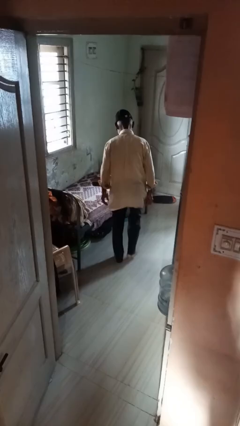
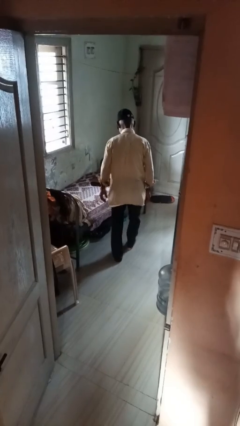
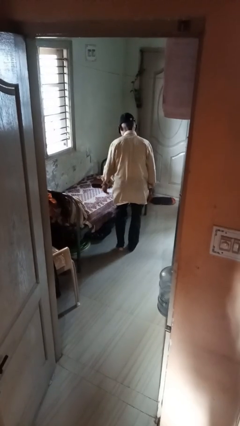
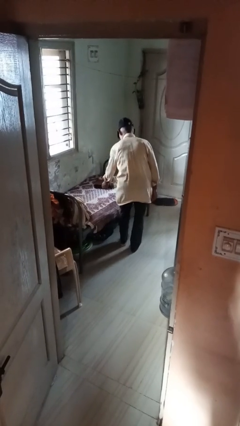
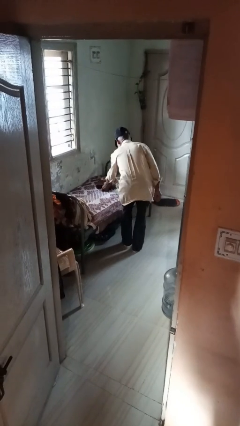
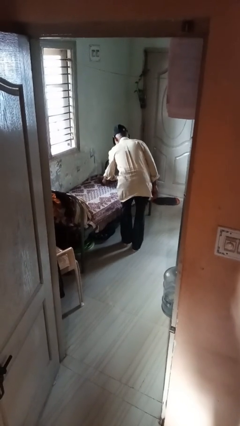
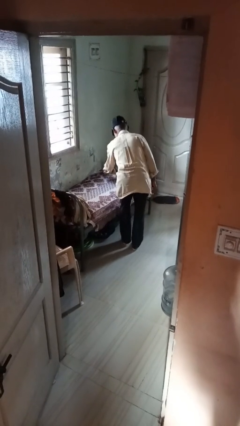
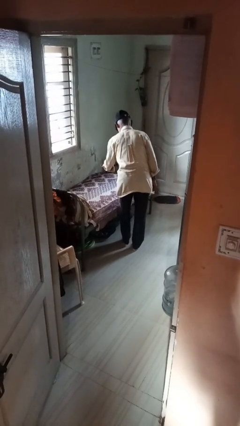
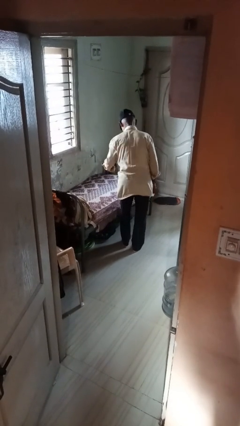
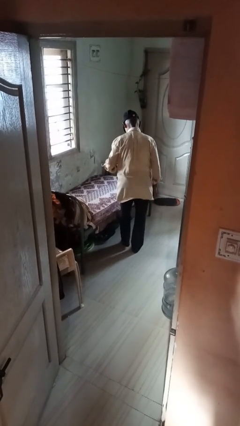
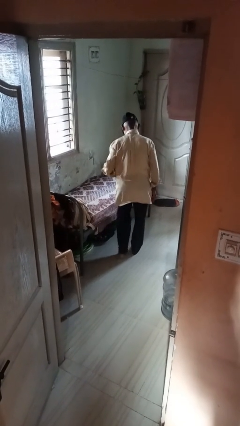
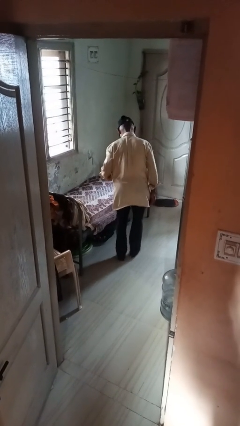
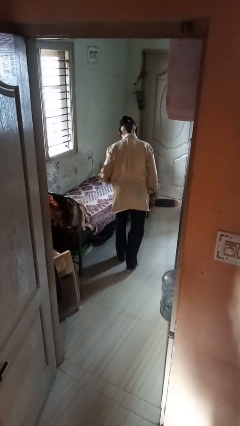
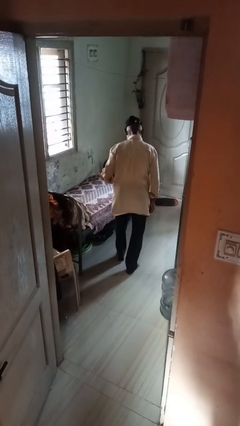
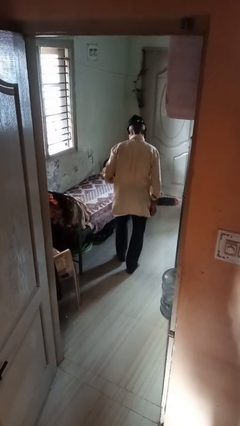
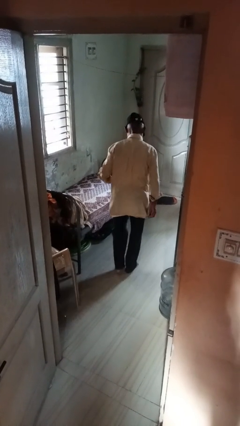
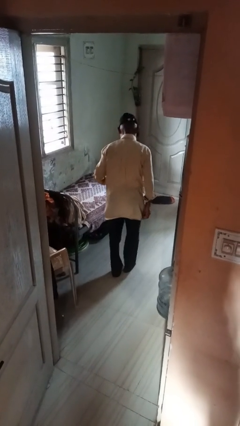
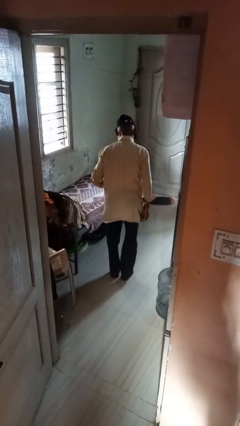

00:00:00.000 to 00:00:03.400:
person picks up object from bed

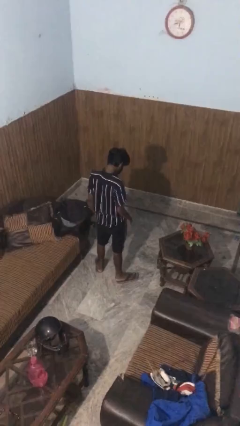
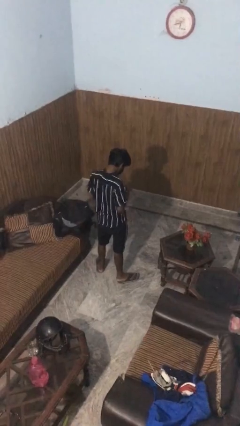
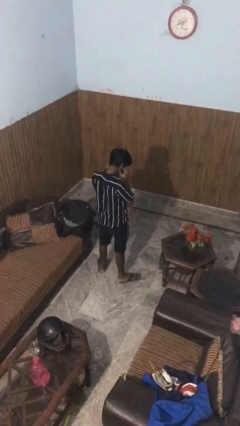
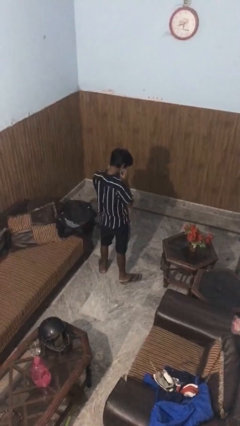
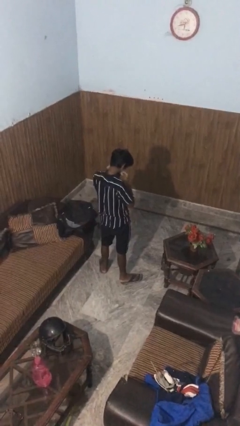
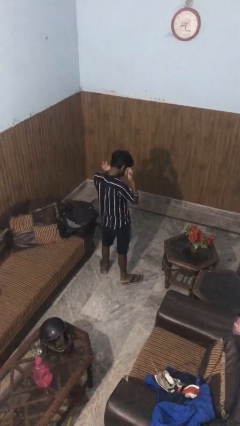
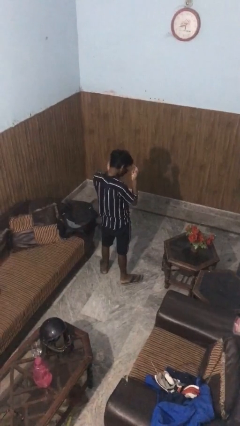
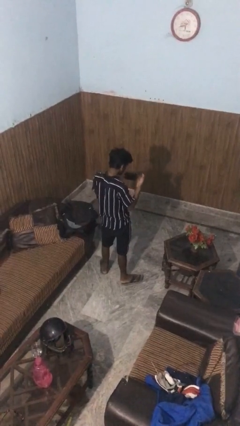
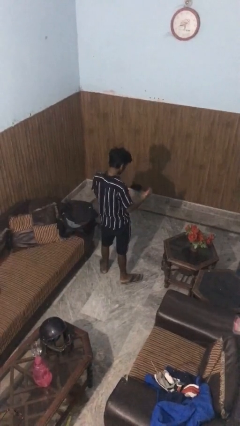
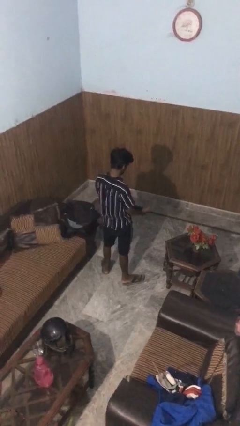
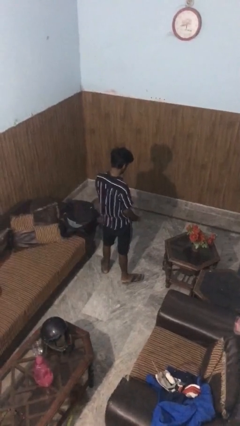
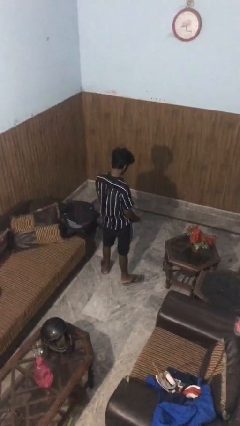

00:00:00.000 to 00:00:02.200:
person takes off facemask

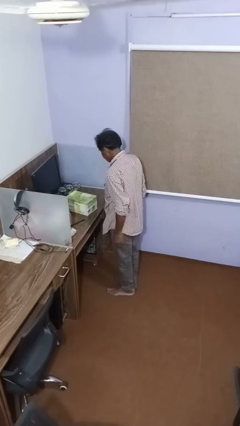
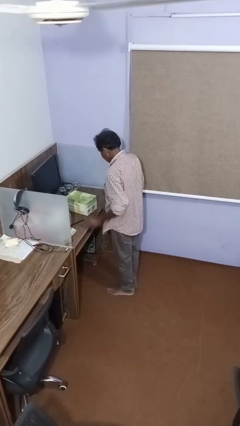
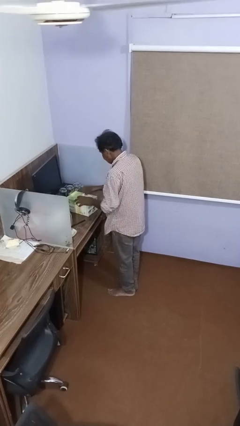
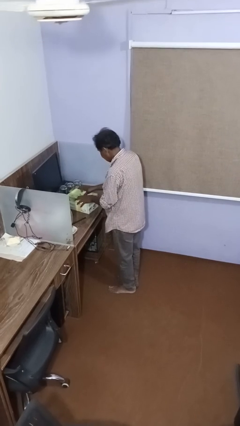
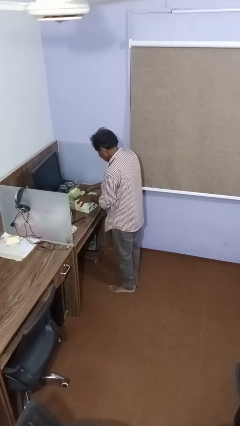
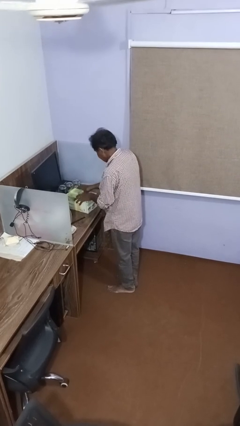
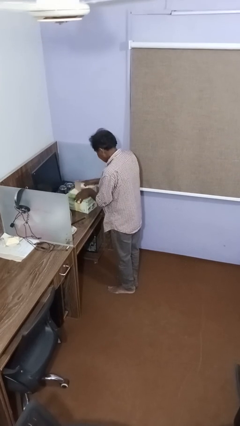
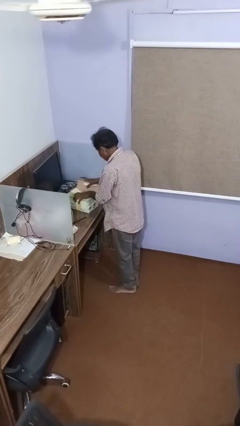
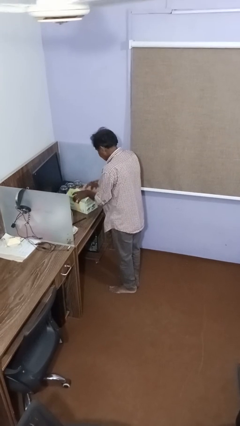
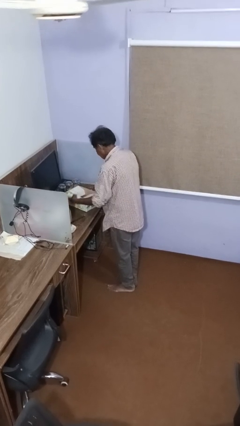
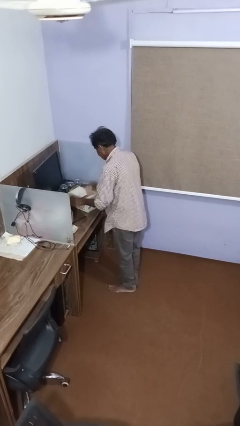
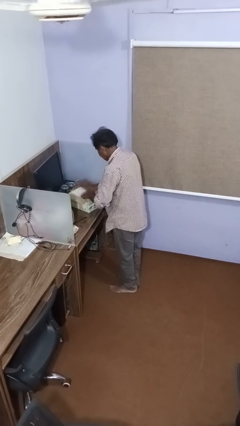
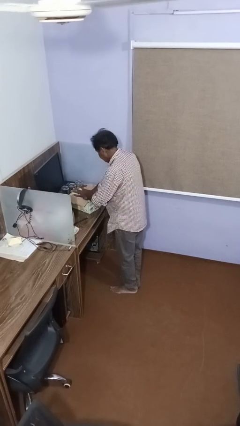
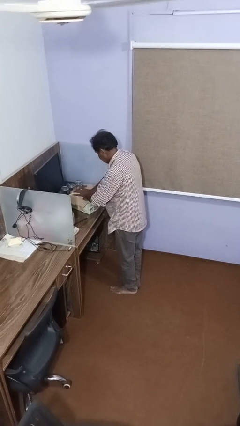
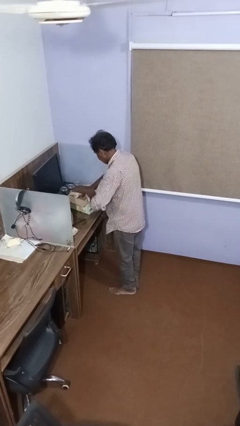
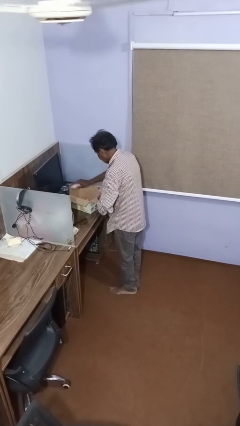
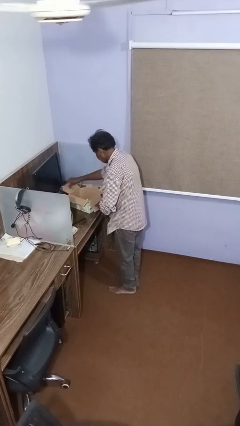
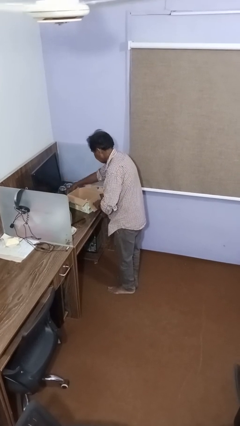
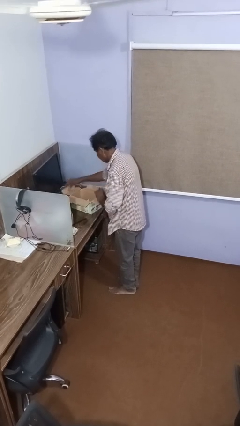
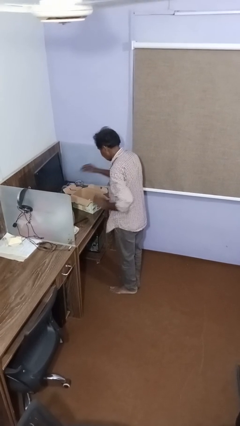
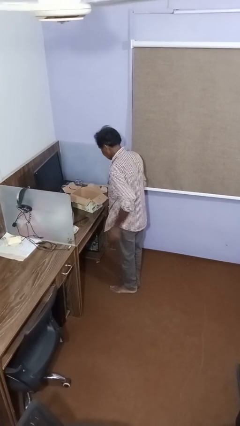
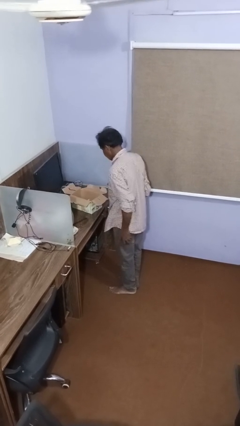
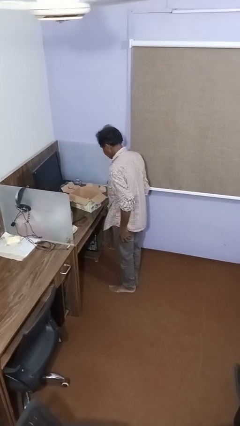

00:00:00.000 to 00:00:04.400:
person opens box

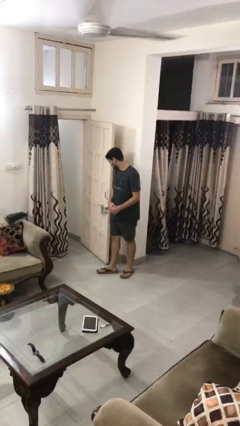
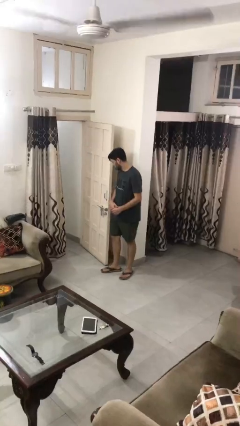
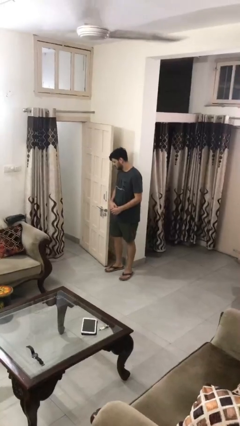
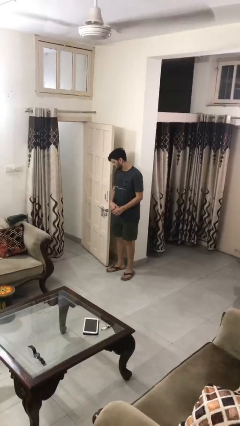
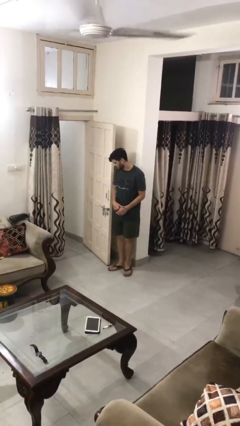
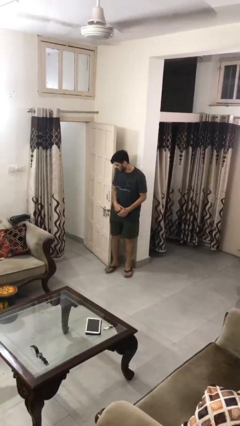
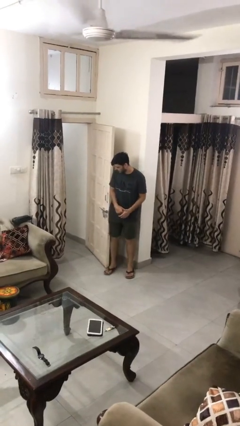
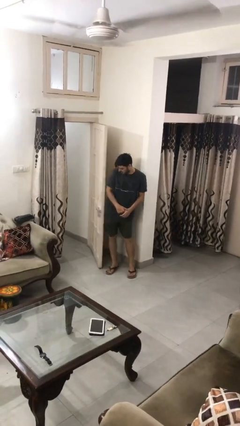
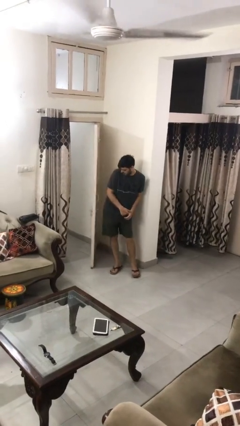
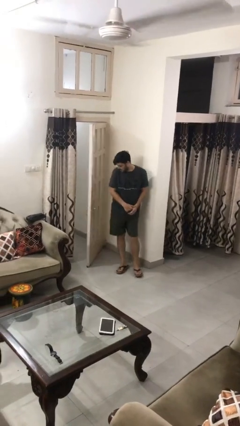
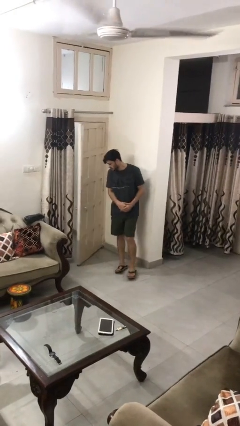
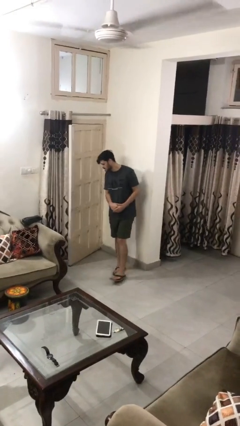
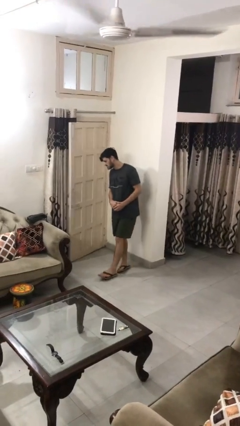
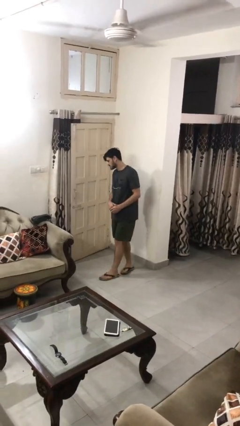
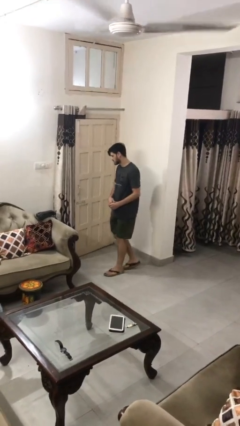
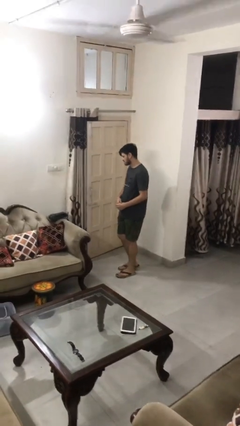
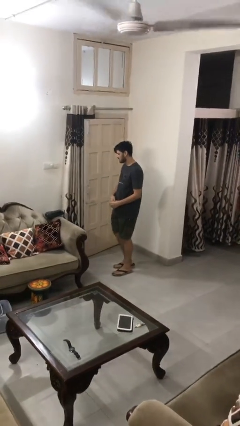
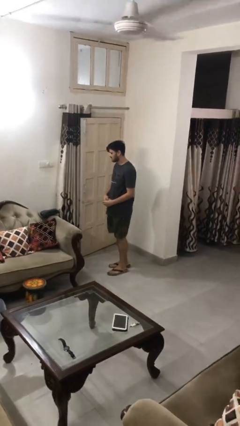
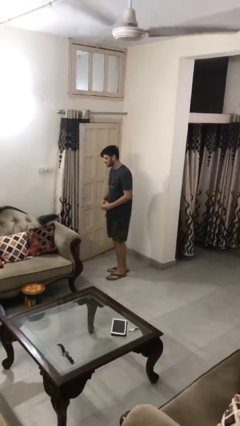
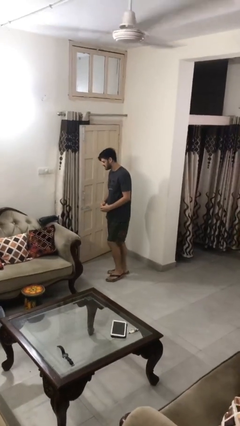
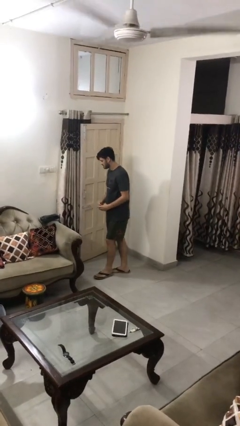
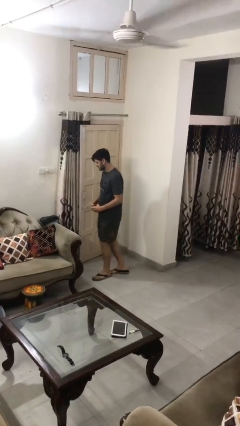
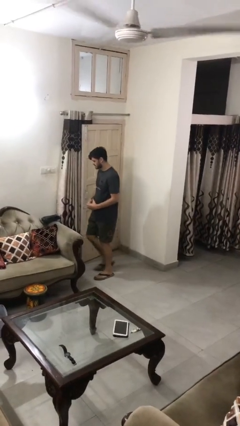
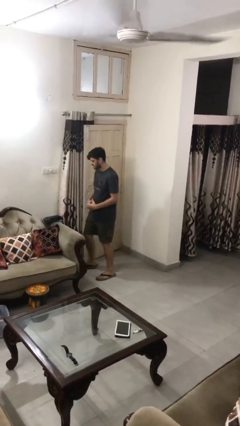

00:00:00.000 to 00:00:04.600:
person closes door with hip

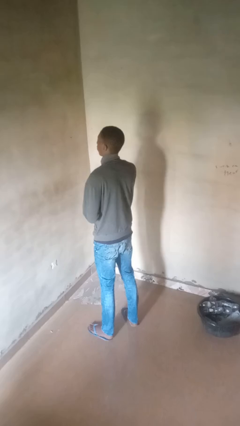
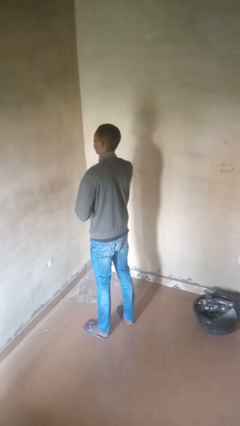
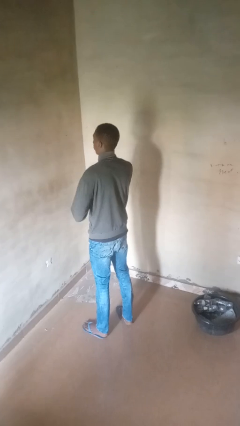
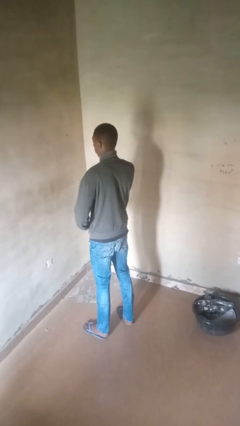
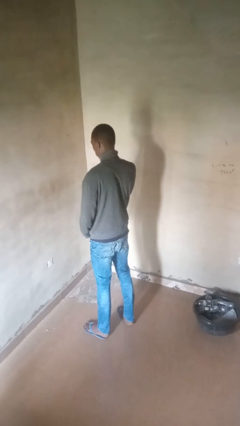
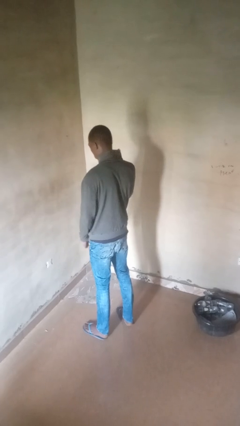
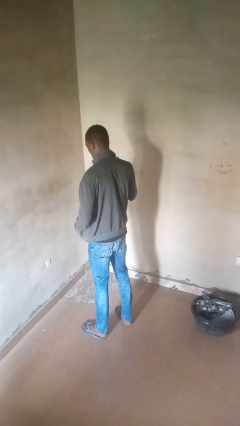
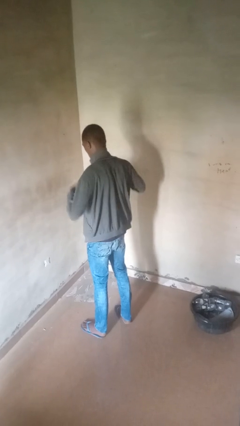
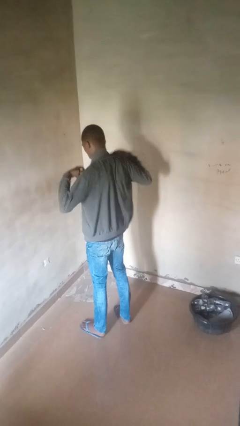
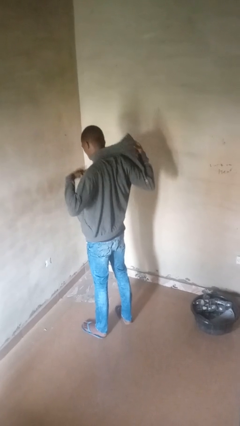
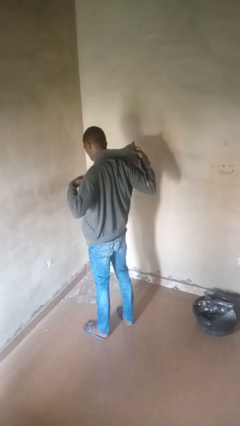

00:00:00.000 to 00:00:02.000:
person unzips jacket

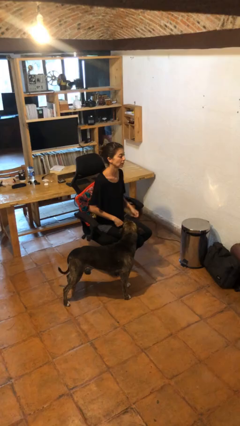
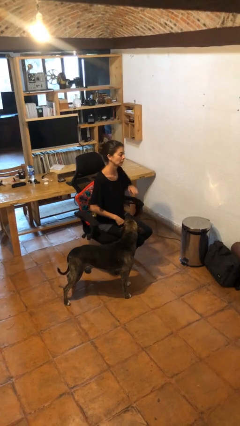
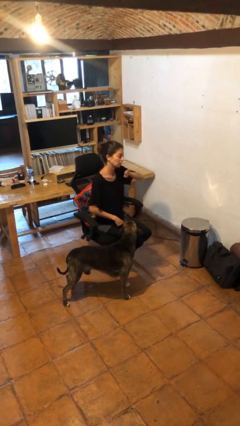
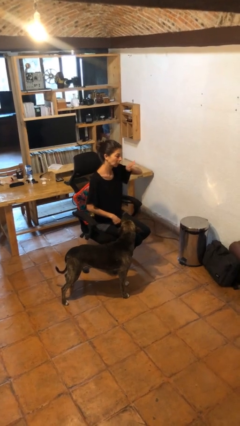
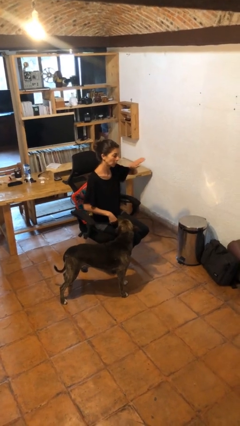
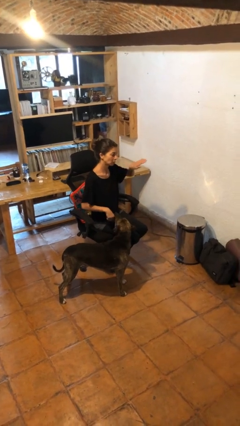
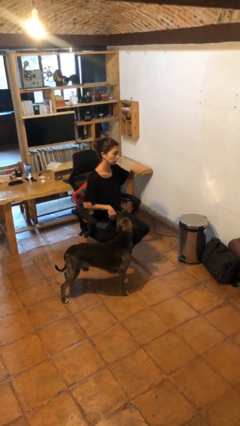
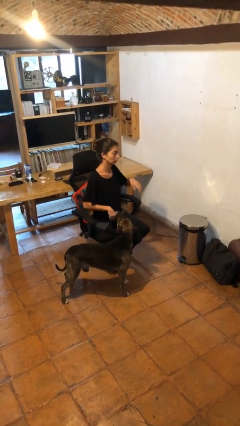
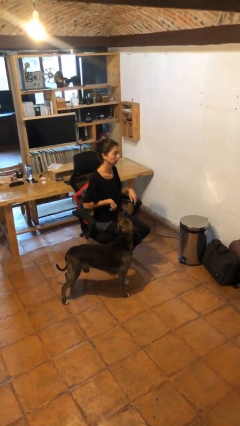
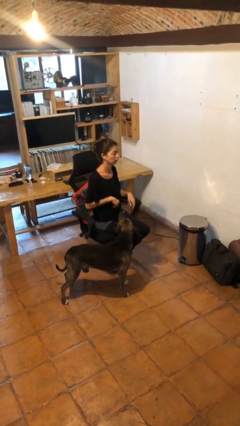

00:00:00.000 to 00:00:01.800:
person gestures swipe left
